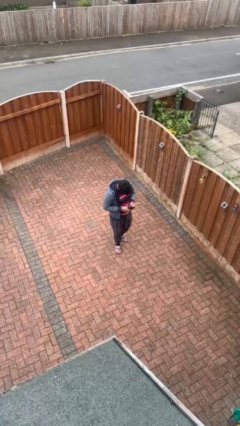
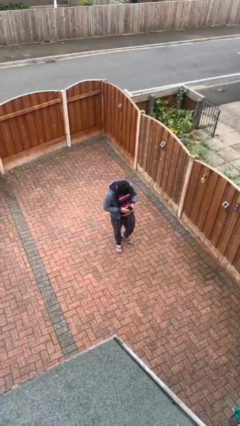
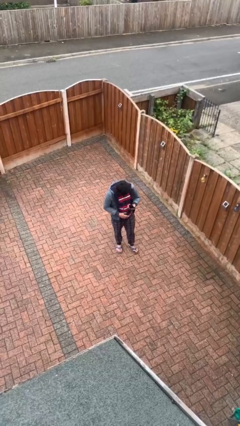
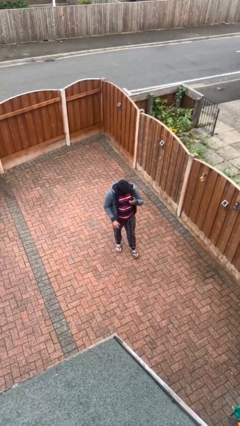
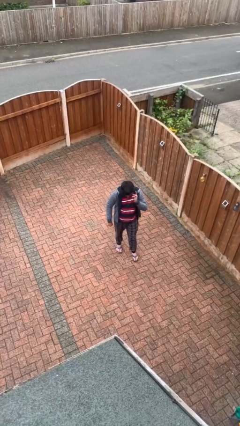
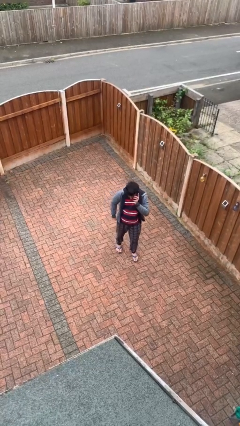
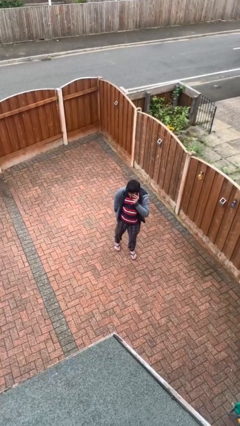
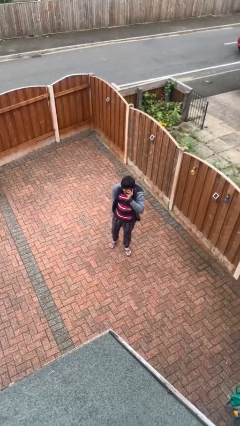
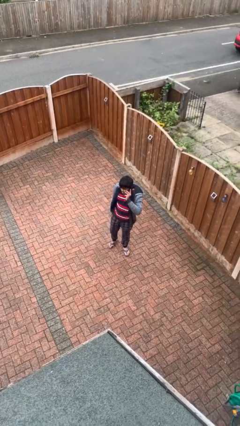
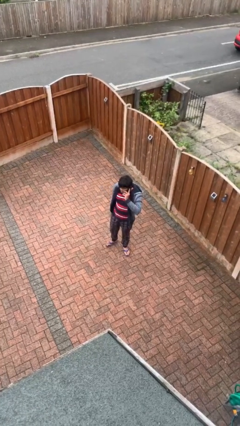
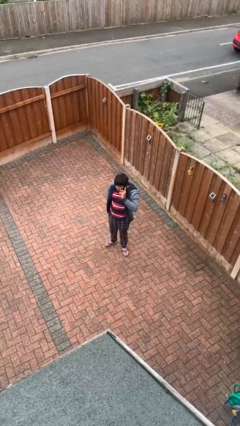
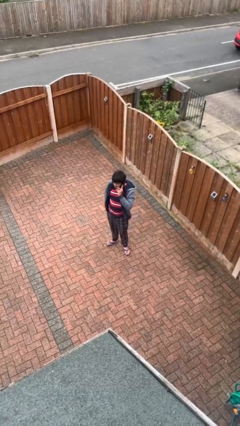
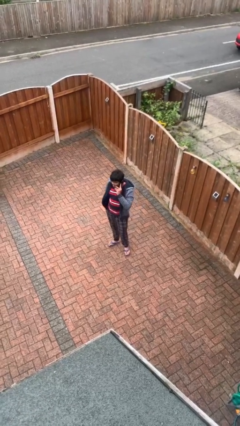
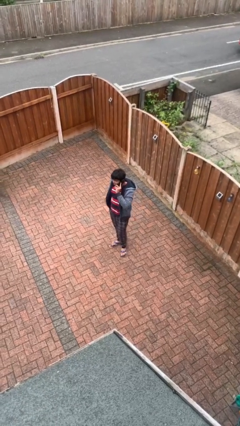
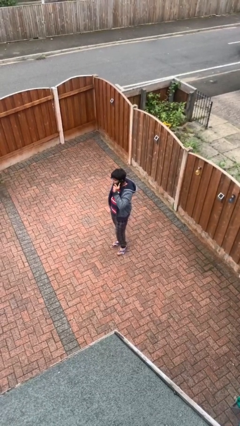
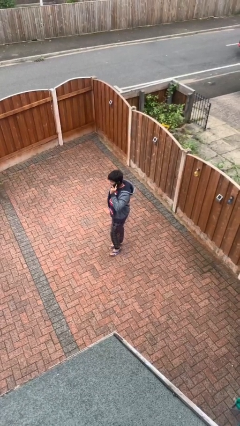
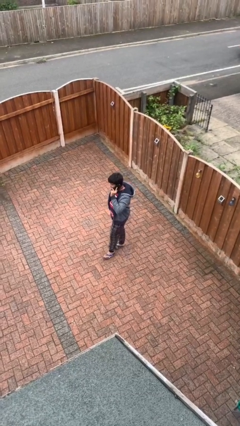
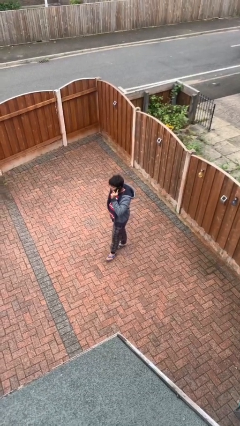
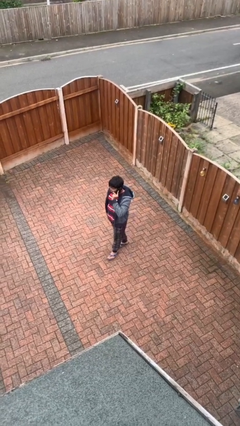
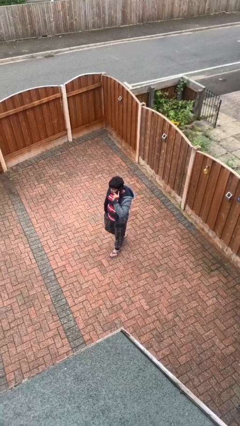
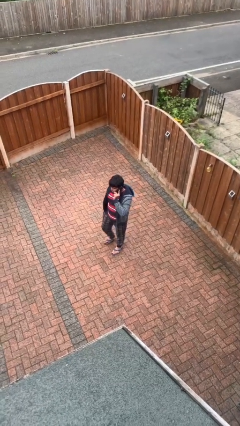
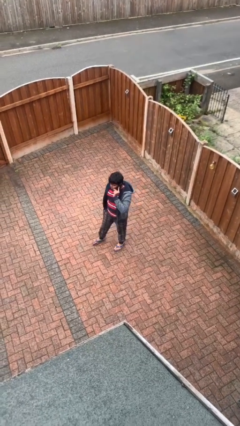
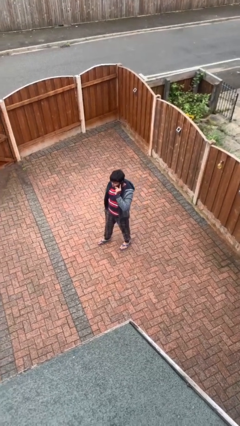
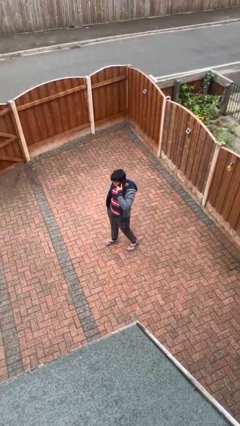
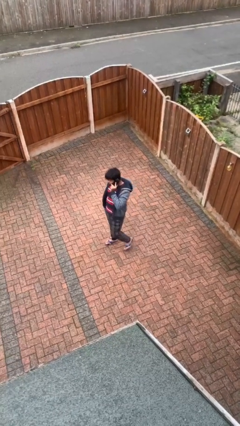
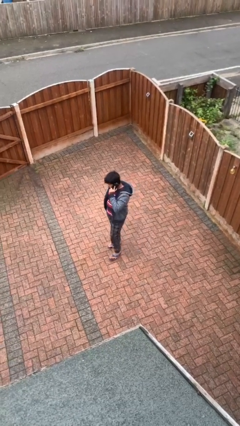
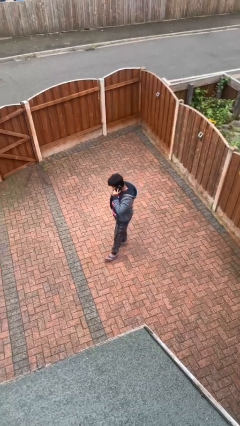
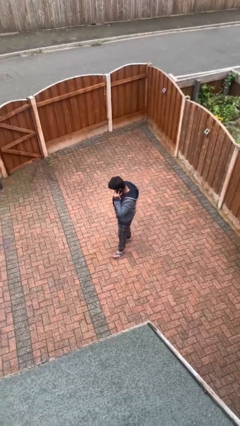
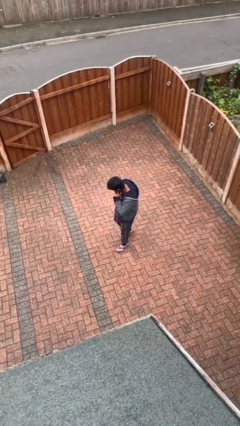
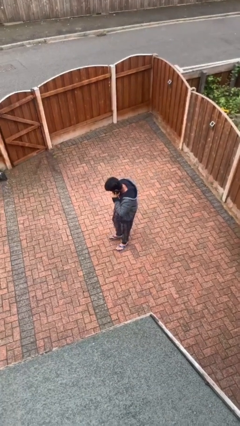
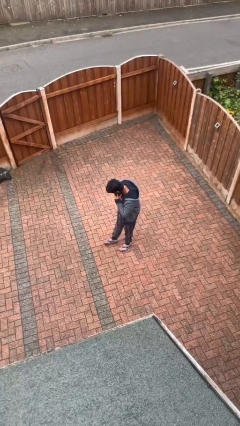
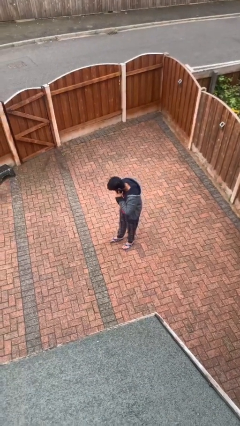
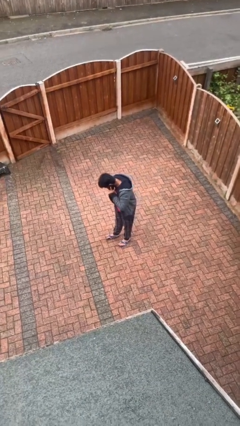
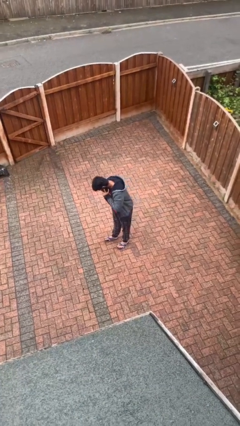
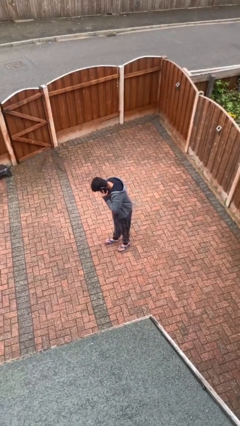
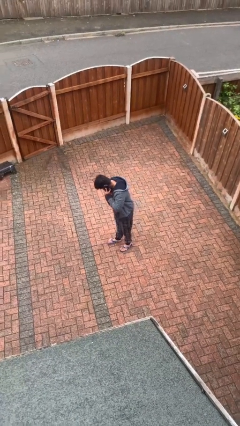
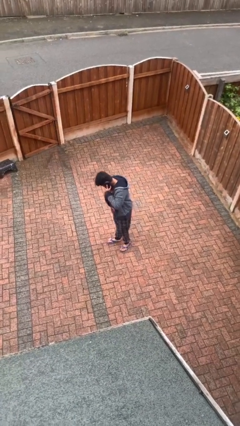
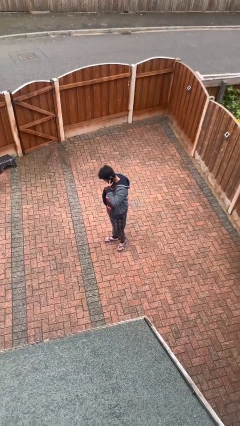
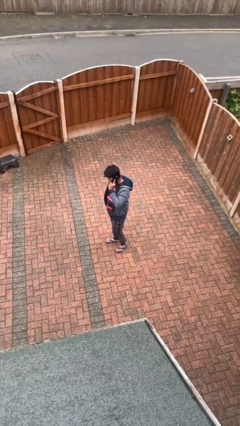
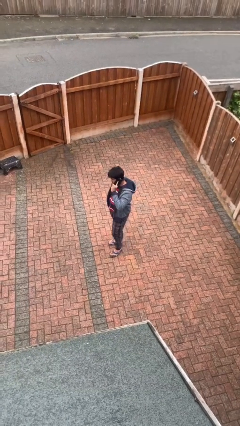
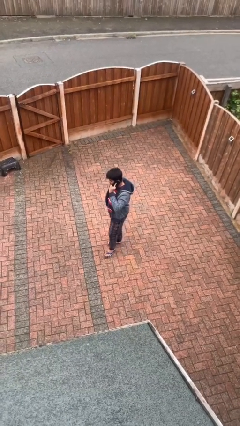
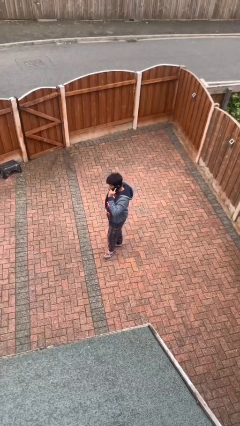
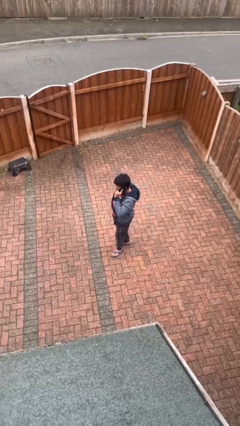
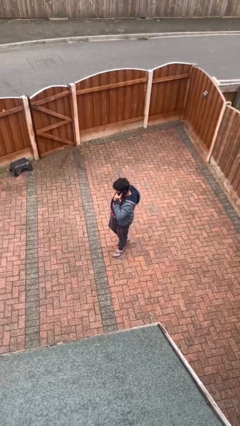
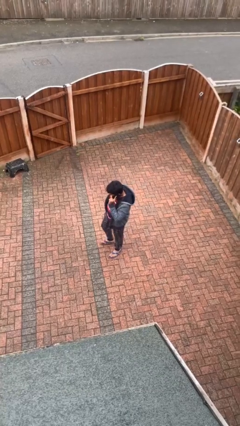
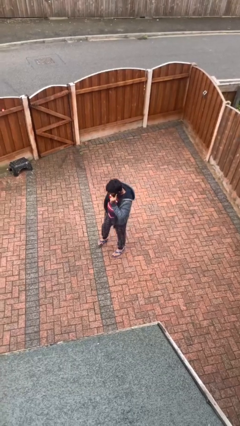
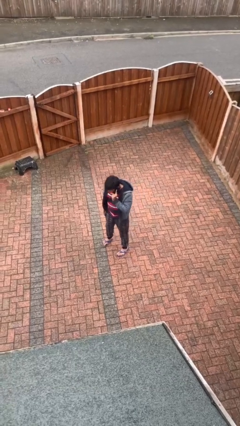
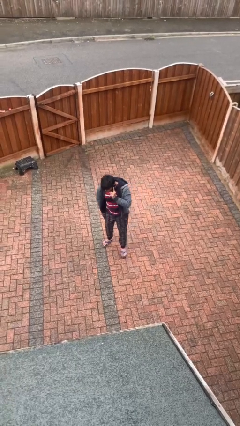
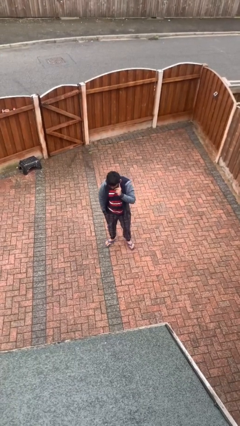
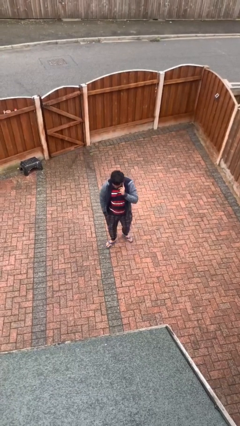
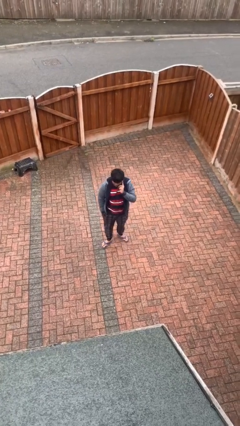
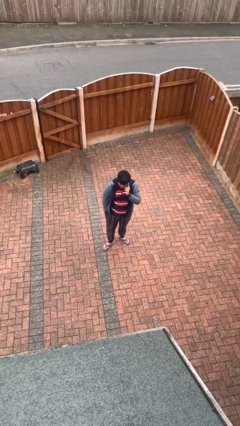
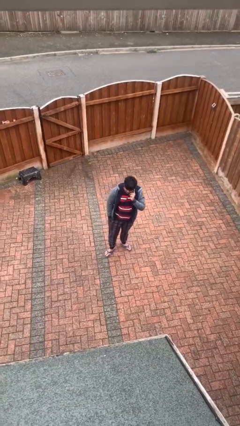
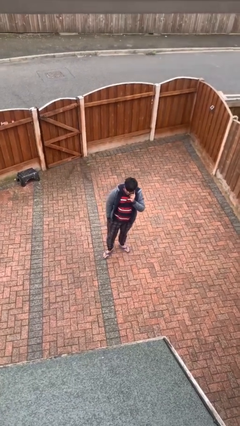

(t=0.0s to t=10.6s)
person talks on phone

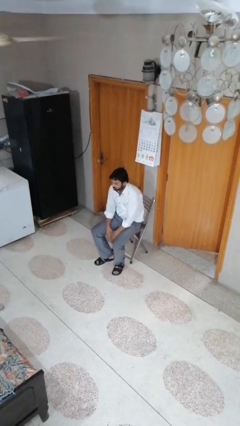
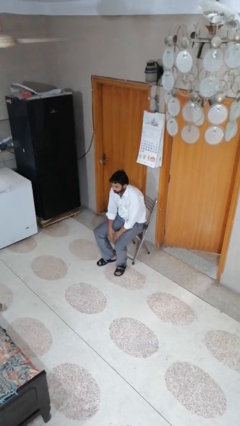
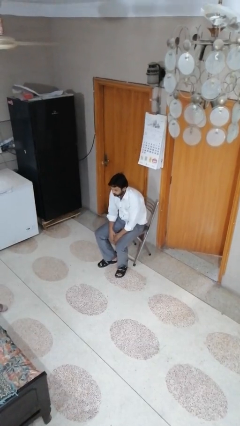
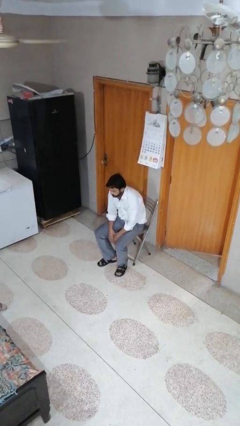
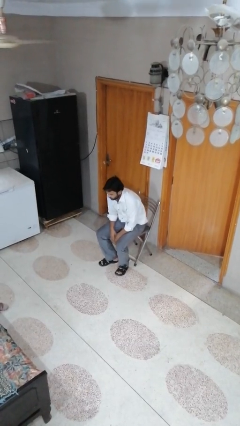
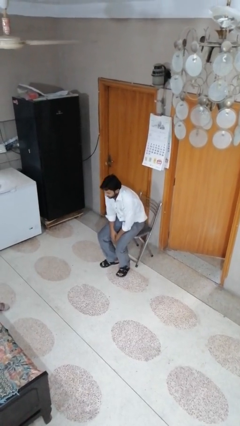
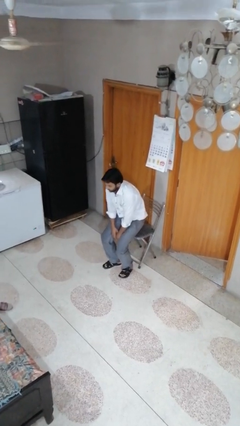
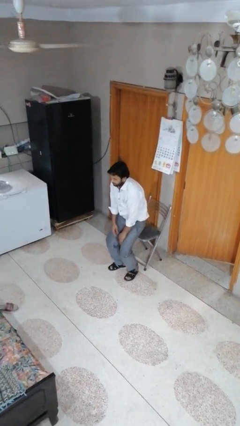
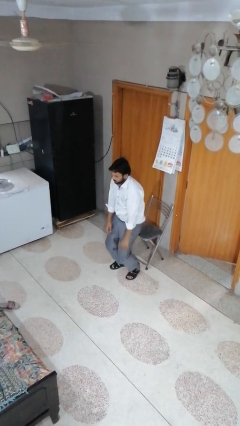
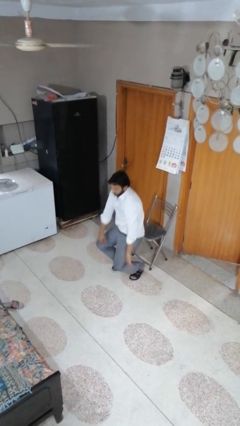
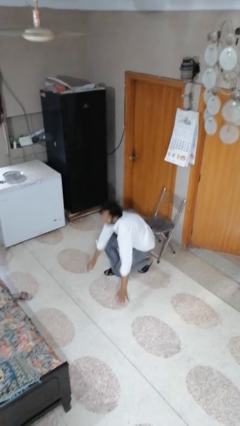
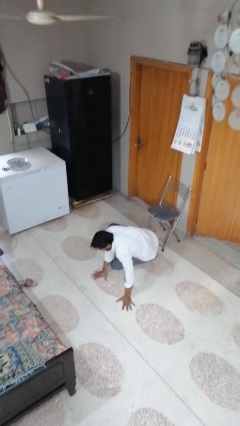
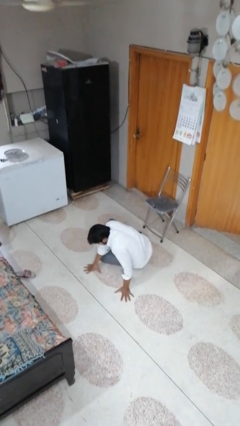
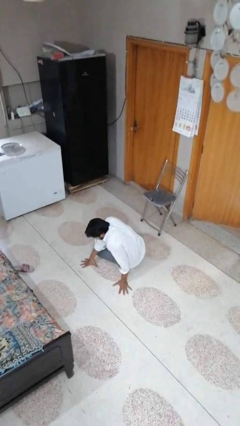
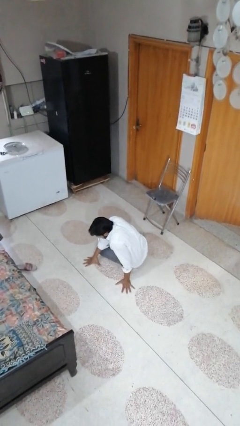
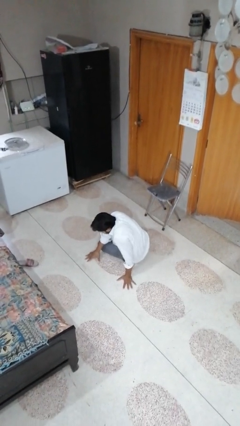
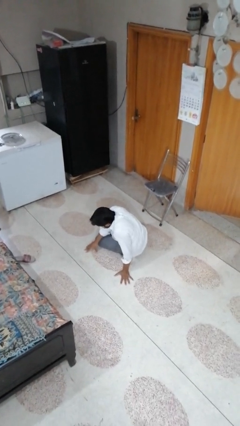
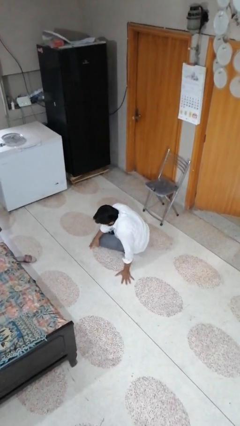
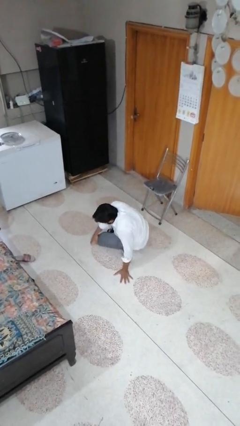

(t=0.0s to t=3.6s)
person falls from chair

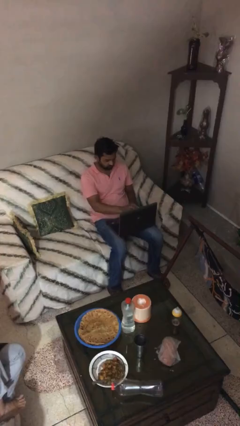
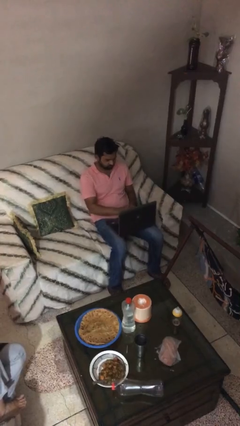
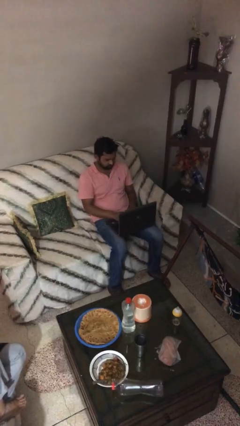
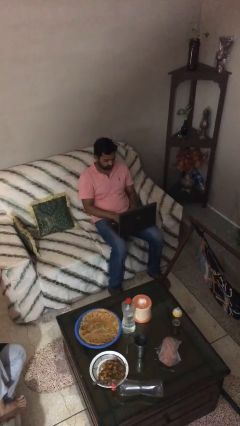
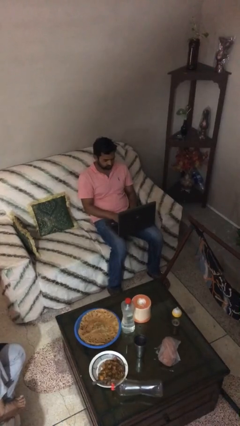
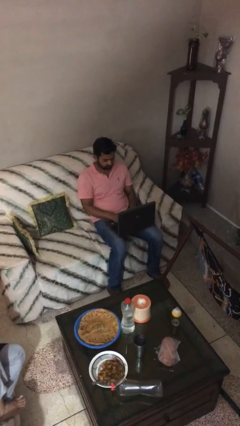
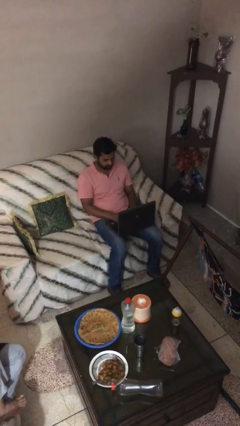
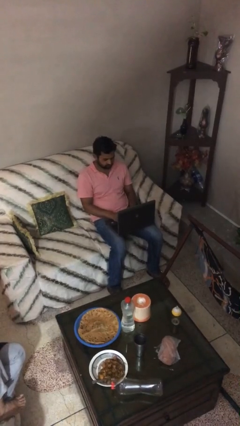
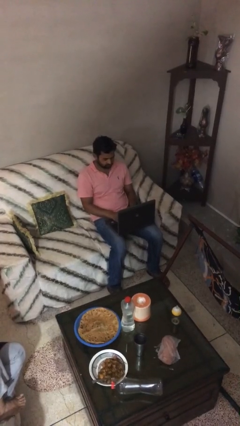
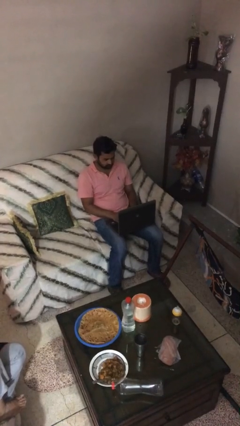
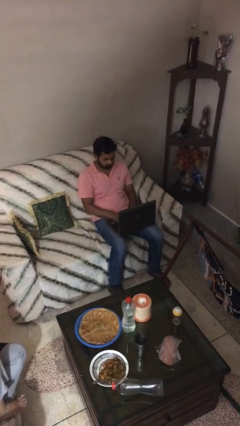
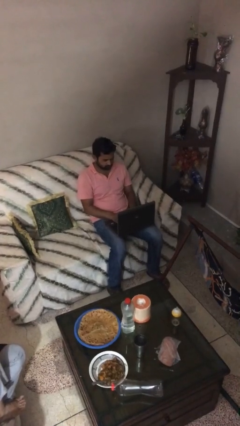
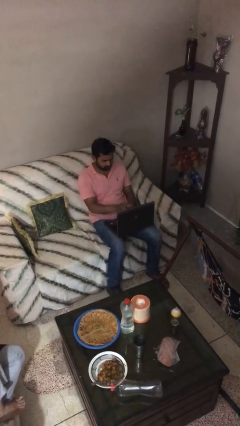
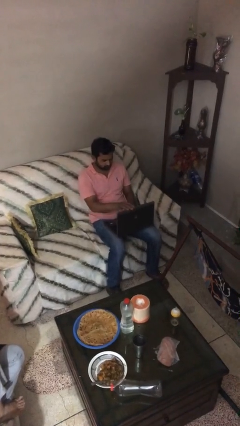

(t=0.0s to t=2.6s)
person interacts with laptop

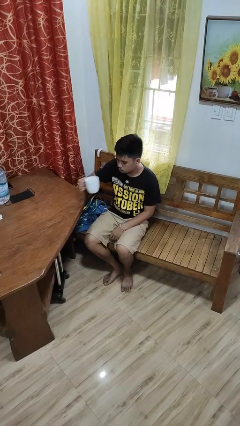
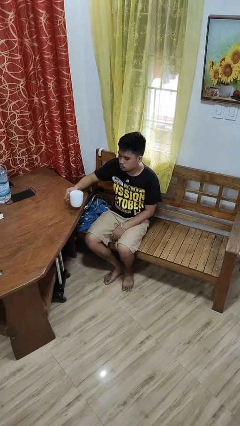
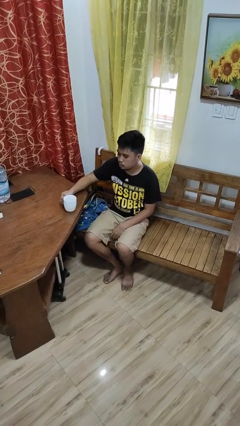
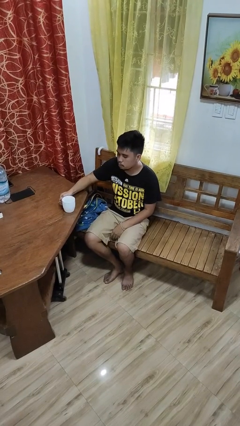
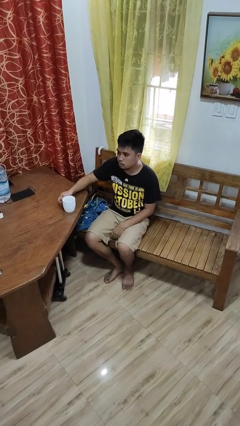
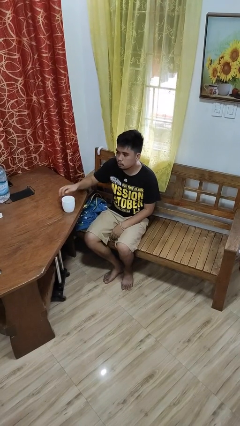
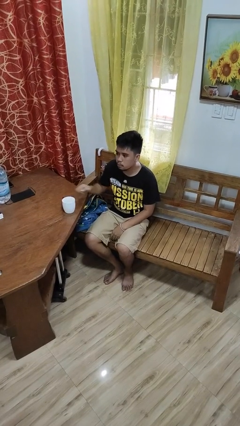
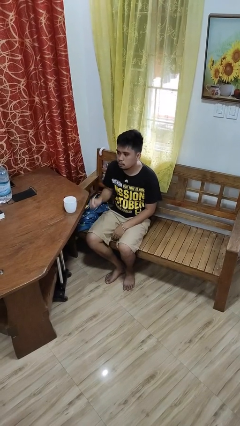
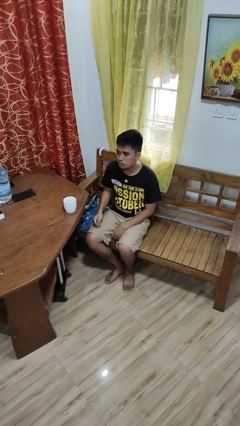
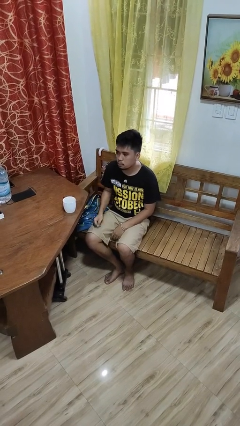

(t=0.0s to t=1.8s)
person puts down object on table
